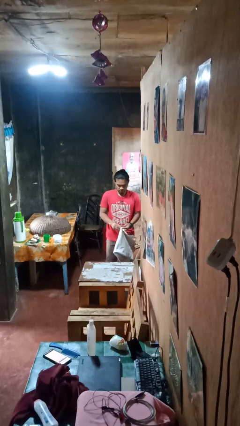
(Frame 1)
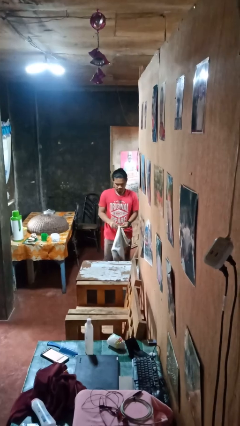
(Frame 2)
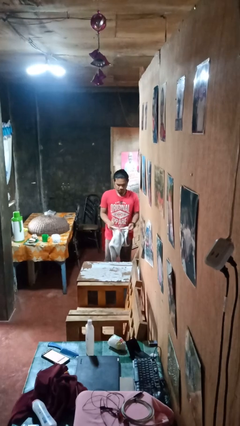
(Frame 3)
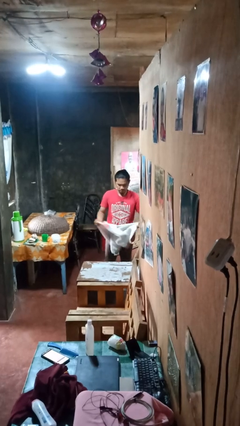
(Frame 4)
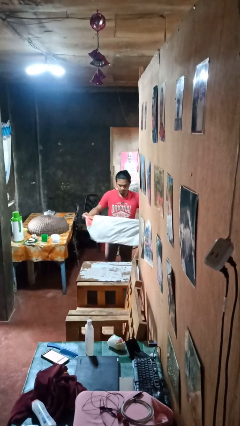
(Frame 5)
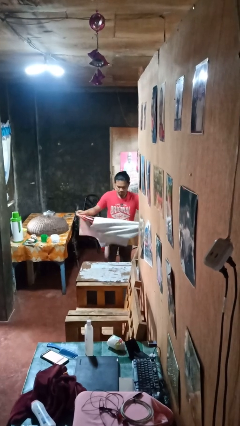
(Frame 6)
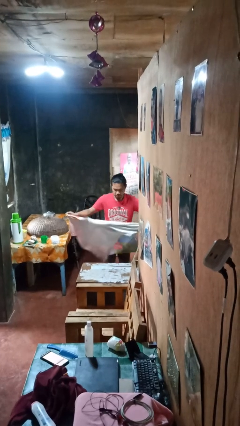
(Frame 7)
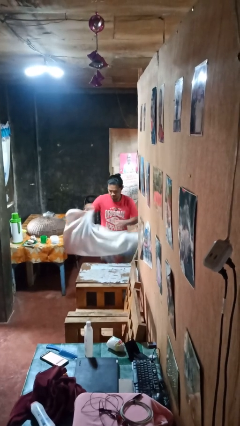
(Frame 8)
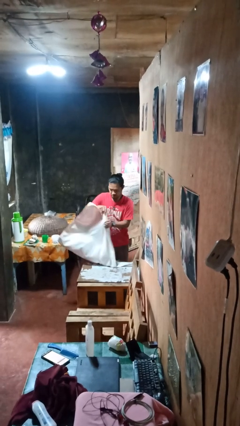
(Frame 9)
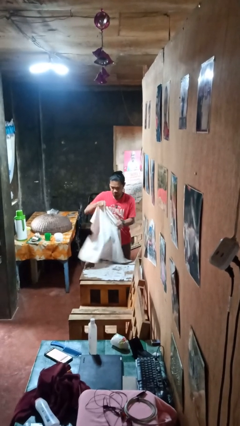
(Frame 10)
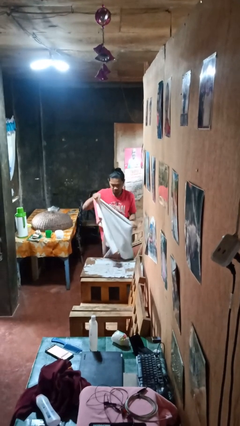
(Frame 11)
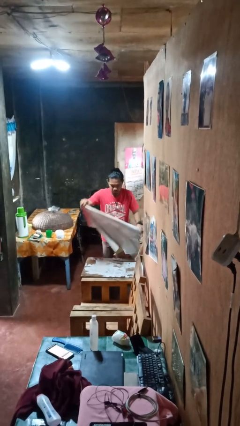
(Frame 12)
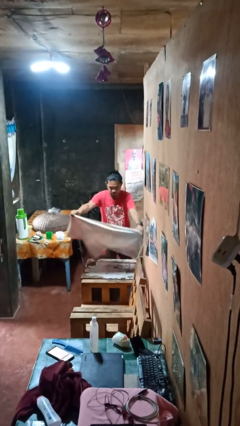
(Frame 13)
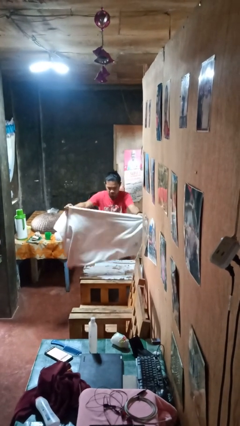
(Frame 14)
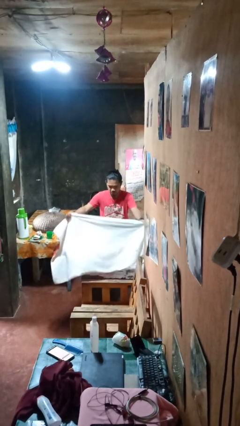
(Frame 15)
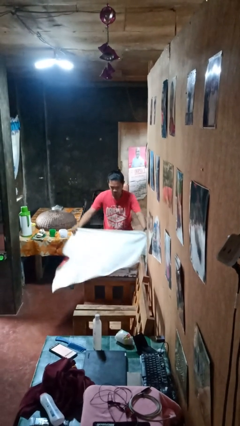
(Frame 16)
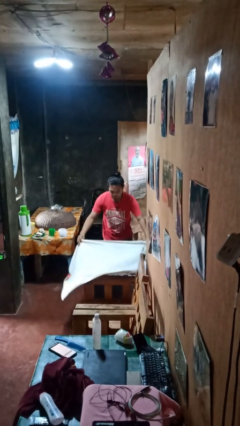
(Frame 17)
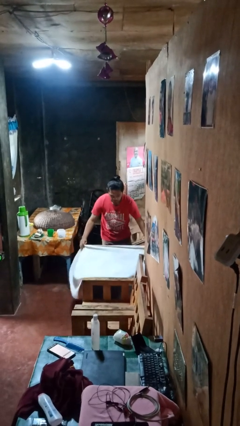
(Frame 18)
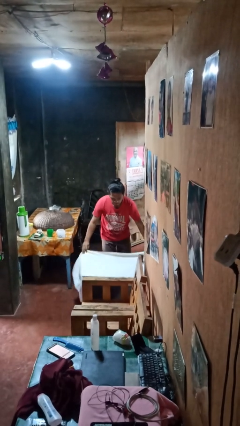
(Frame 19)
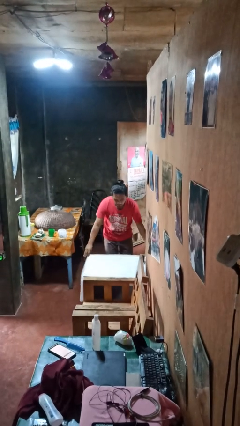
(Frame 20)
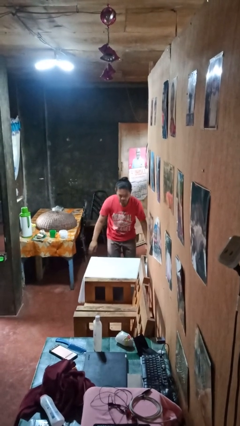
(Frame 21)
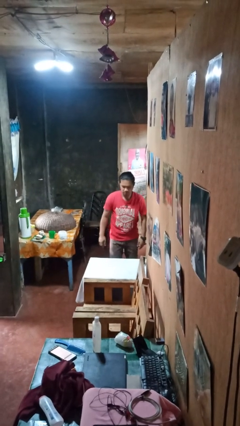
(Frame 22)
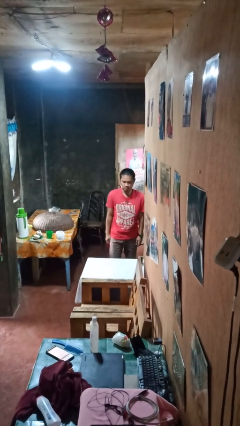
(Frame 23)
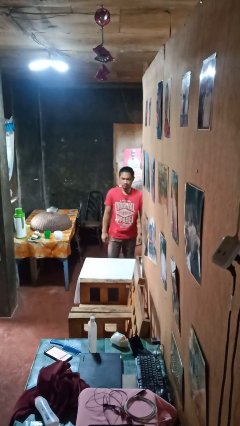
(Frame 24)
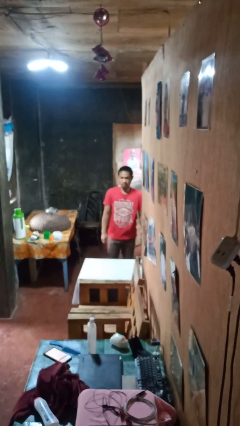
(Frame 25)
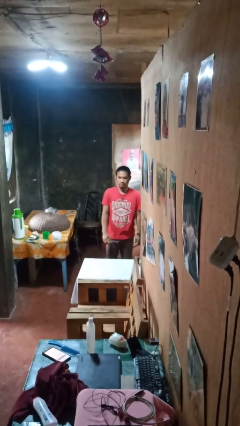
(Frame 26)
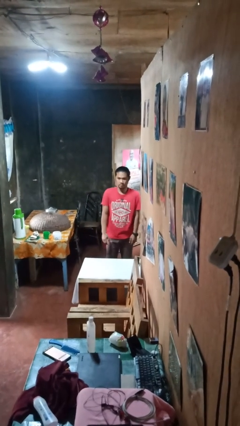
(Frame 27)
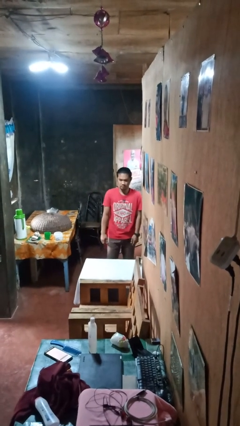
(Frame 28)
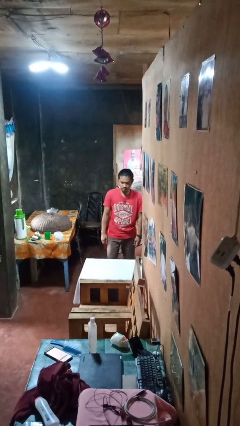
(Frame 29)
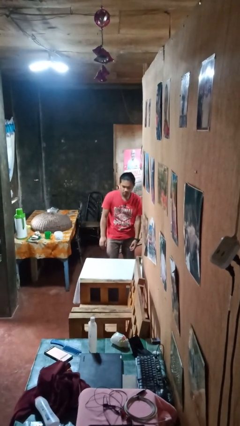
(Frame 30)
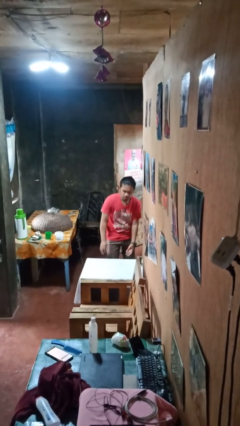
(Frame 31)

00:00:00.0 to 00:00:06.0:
person spreads tablecloth

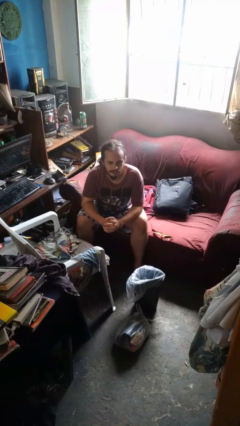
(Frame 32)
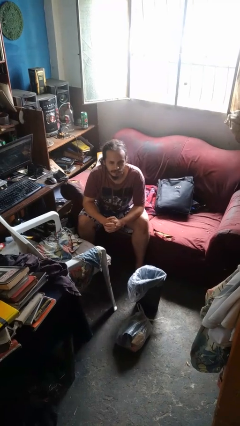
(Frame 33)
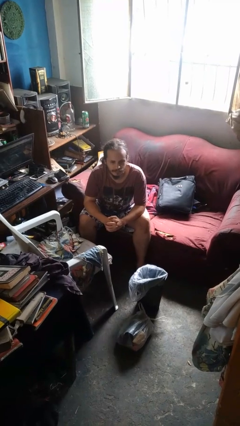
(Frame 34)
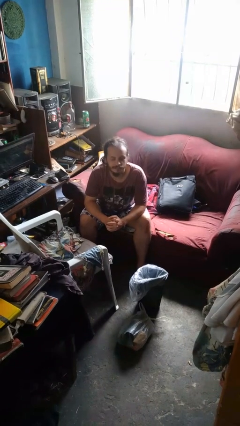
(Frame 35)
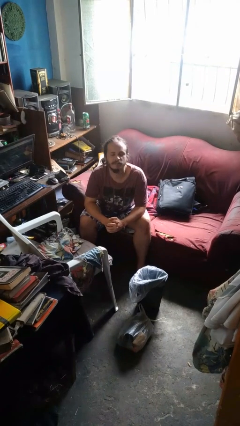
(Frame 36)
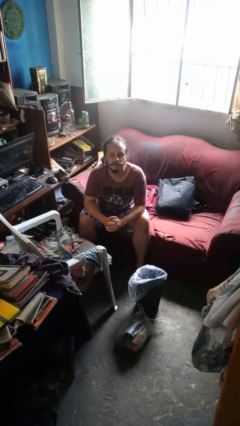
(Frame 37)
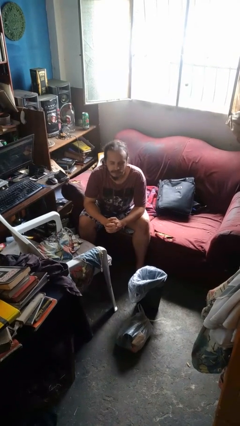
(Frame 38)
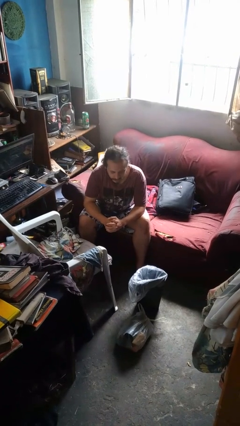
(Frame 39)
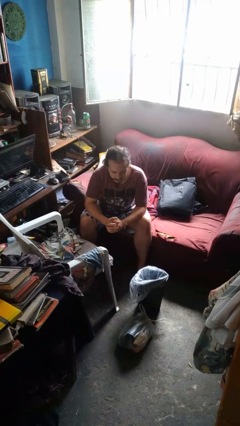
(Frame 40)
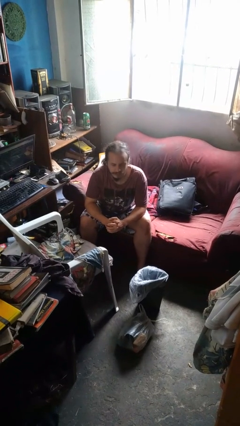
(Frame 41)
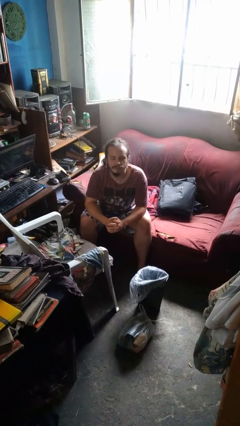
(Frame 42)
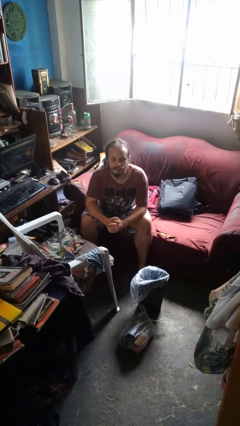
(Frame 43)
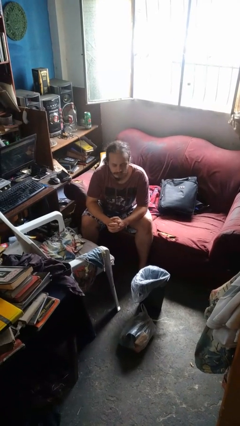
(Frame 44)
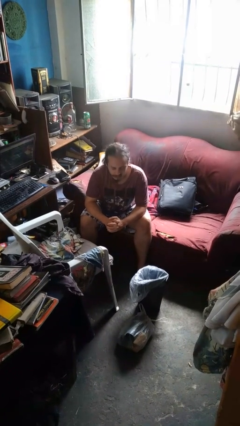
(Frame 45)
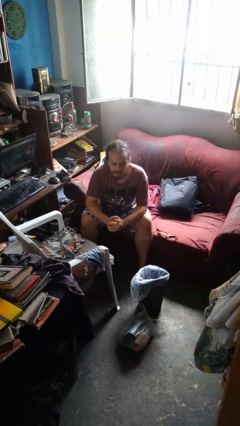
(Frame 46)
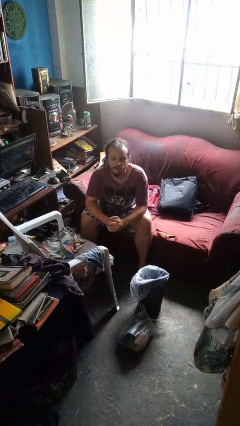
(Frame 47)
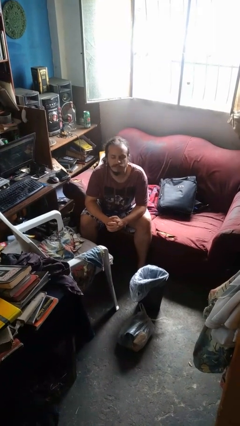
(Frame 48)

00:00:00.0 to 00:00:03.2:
person nods head

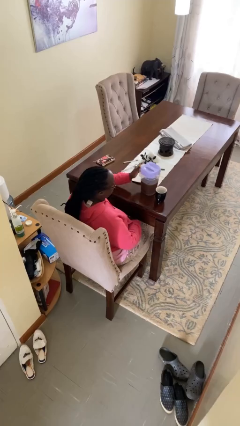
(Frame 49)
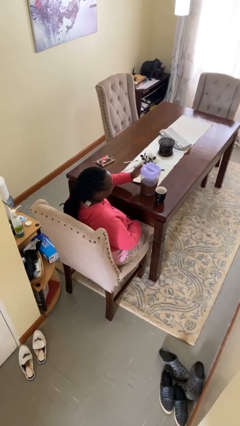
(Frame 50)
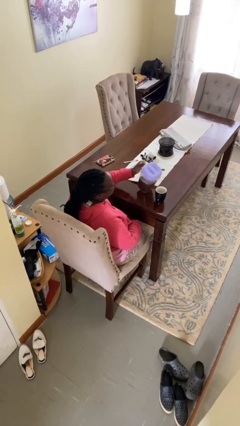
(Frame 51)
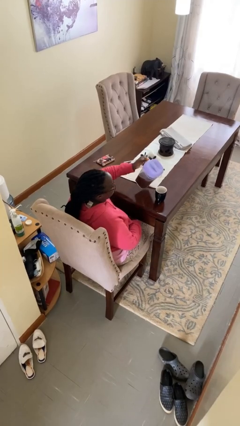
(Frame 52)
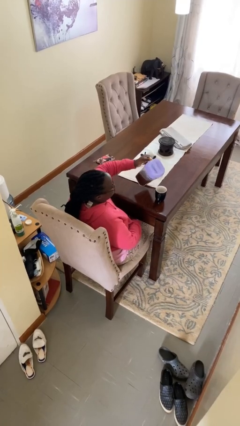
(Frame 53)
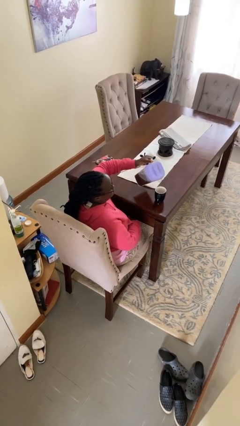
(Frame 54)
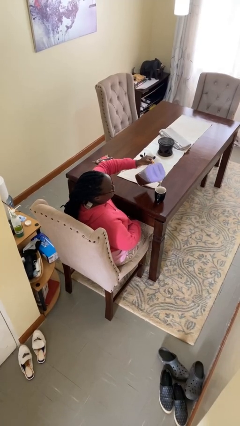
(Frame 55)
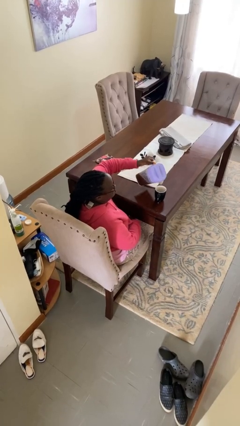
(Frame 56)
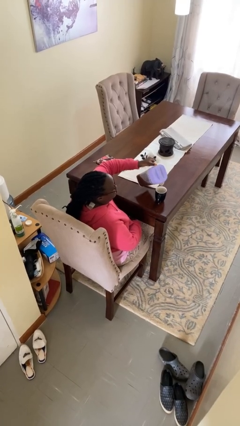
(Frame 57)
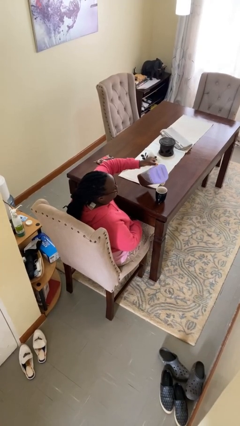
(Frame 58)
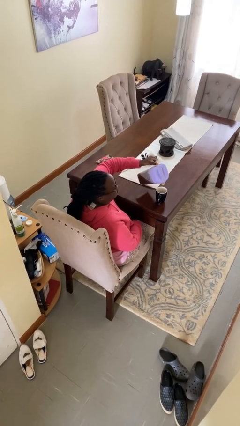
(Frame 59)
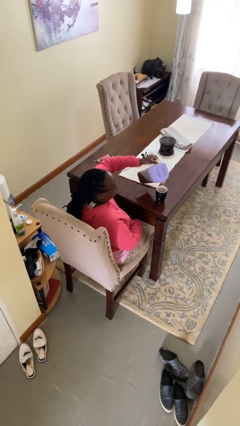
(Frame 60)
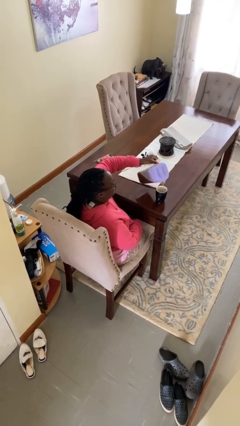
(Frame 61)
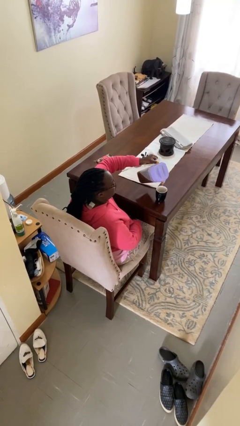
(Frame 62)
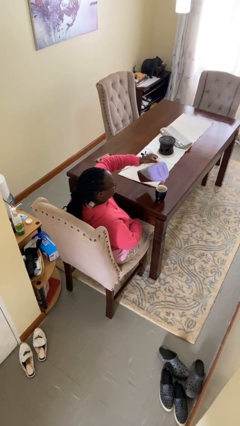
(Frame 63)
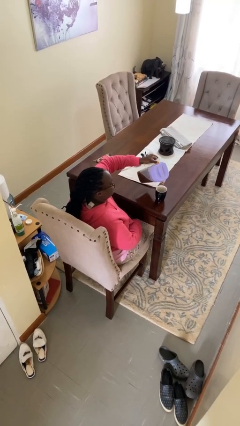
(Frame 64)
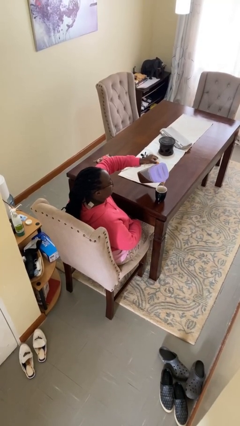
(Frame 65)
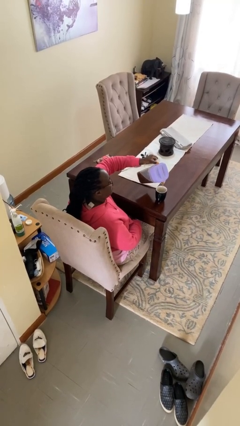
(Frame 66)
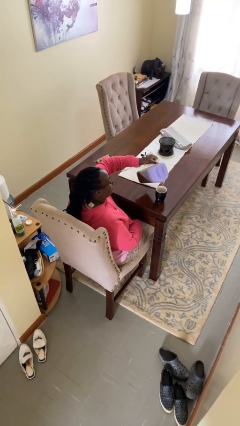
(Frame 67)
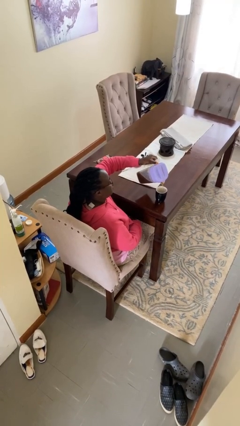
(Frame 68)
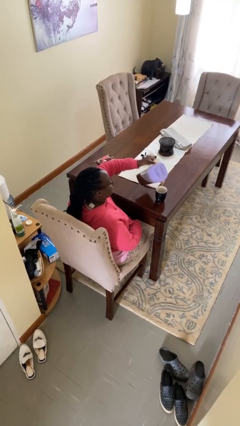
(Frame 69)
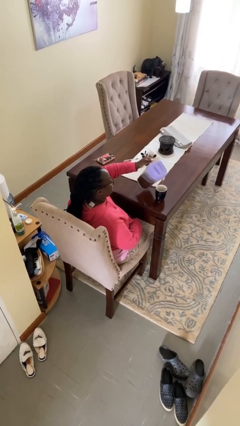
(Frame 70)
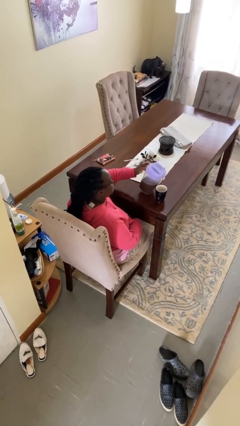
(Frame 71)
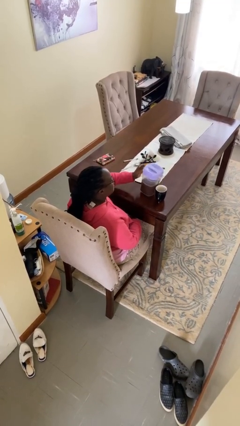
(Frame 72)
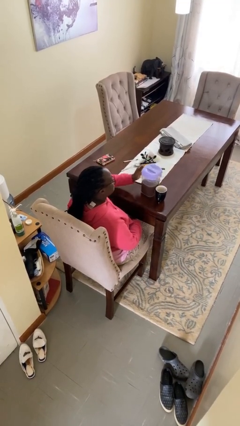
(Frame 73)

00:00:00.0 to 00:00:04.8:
person pours coffee into mug

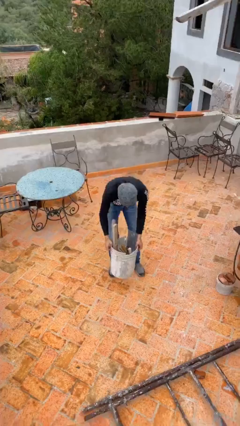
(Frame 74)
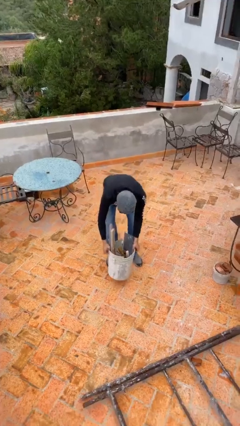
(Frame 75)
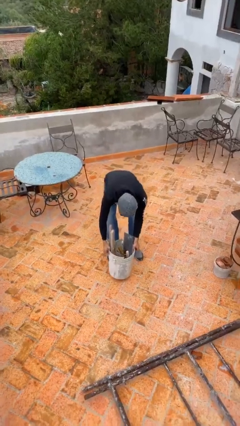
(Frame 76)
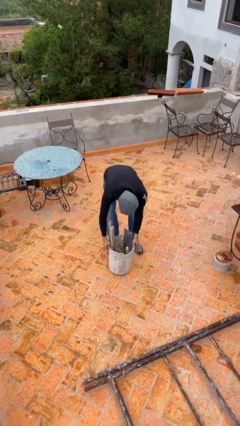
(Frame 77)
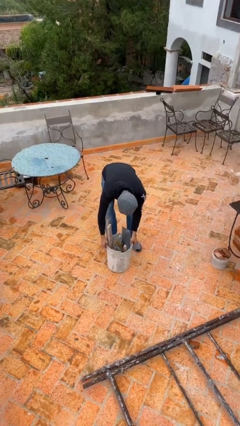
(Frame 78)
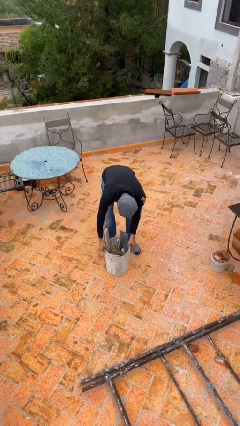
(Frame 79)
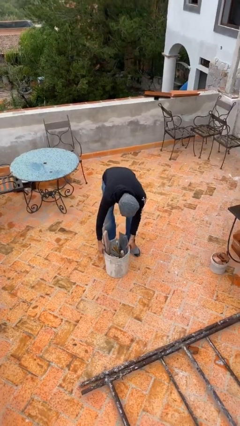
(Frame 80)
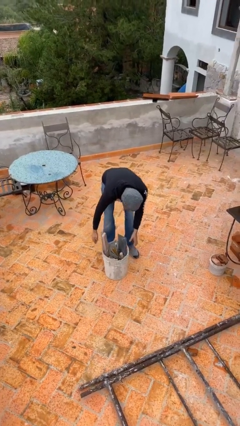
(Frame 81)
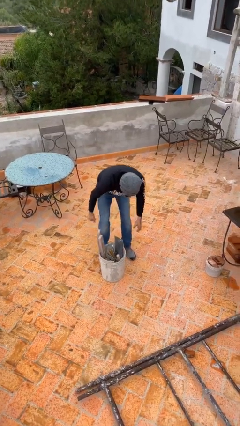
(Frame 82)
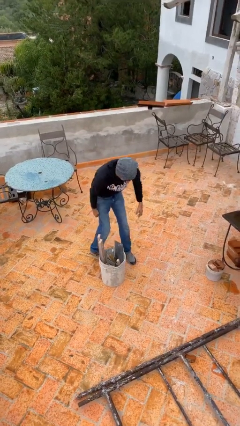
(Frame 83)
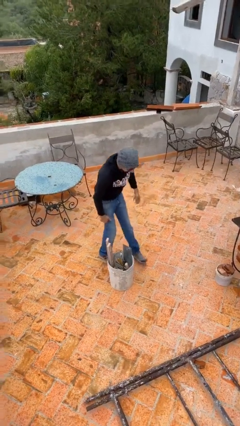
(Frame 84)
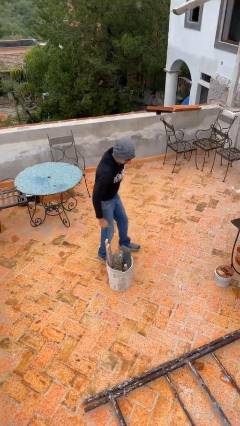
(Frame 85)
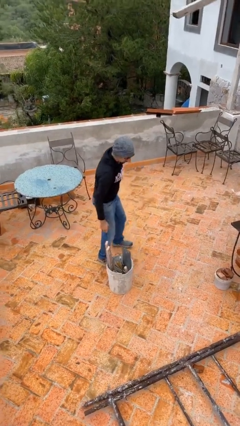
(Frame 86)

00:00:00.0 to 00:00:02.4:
person puts down object on floor

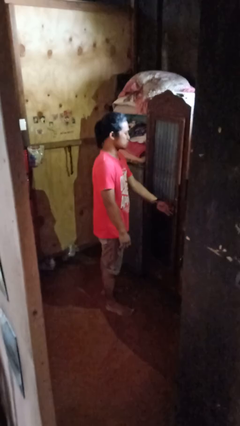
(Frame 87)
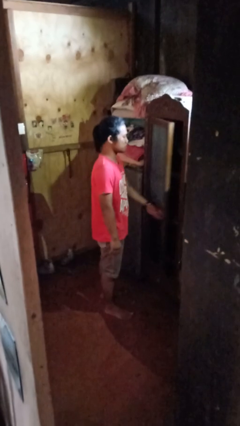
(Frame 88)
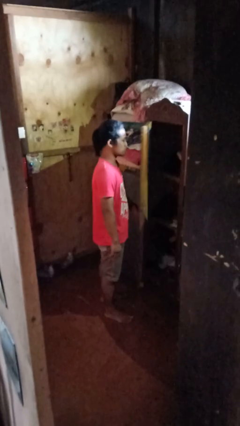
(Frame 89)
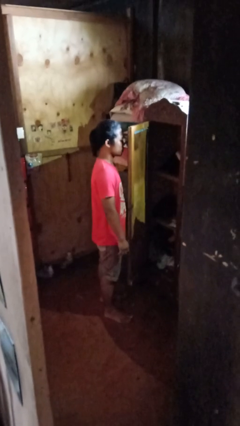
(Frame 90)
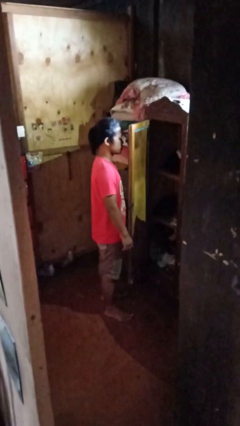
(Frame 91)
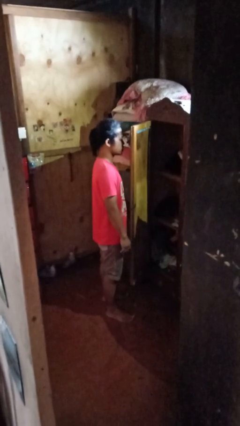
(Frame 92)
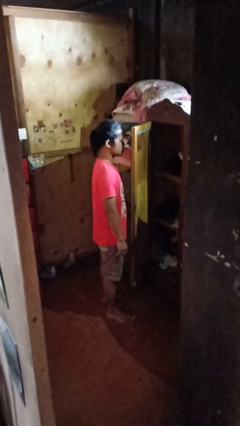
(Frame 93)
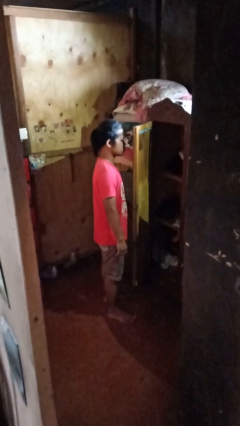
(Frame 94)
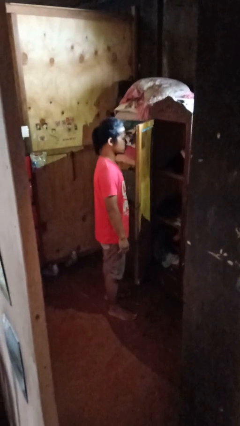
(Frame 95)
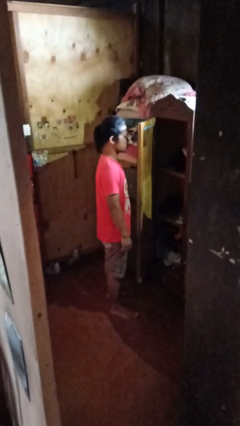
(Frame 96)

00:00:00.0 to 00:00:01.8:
person opens closet door
